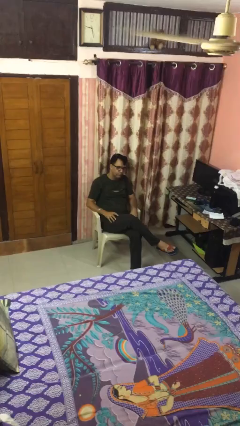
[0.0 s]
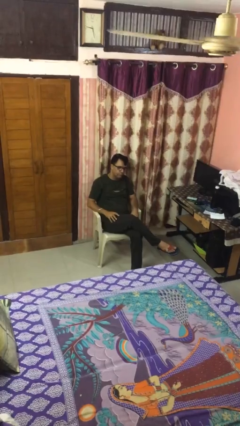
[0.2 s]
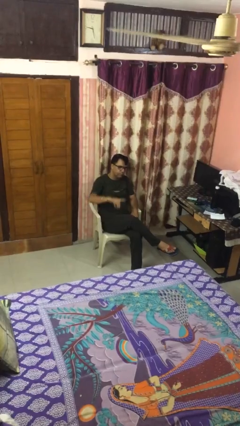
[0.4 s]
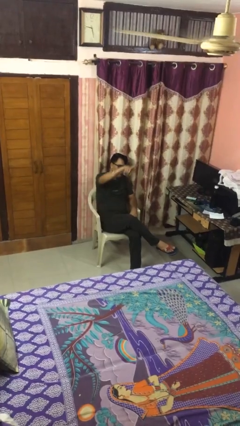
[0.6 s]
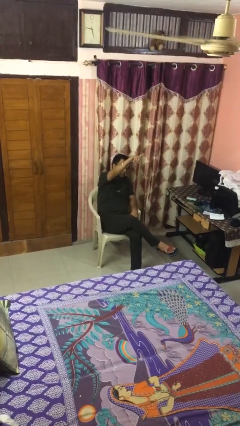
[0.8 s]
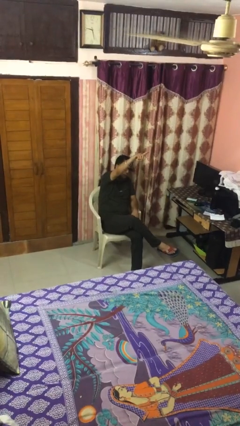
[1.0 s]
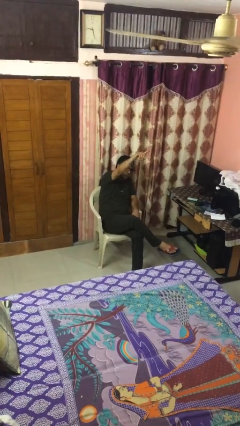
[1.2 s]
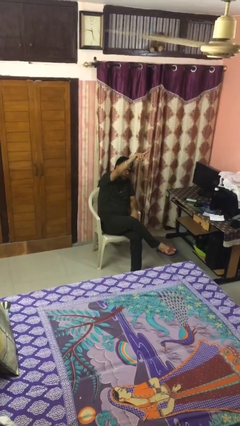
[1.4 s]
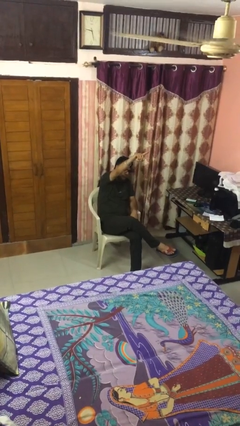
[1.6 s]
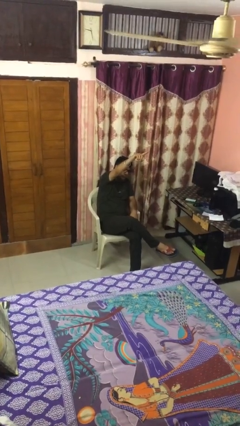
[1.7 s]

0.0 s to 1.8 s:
person gestures raise hand

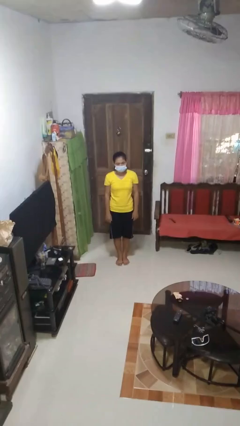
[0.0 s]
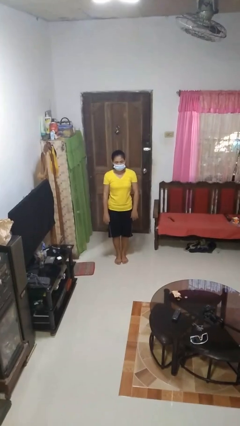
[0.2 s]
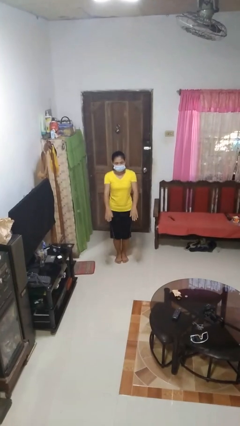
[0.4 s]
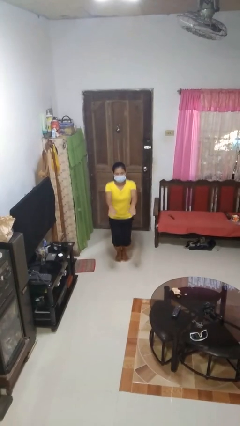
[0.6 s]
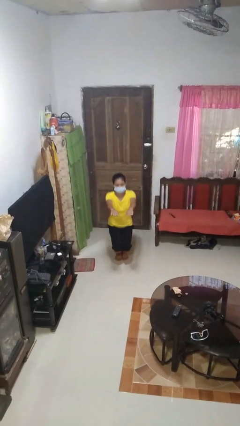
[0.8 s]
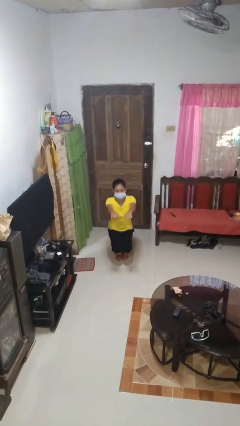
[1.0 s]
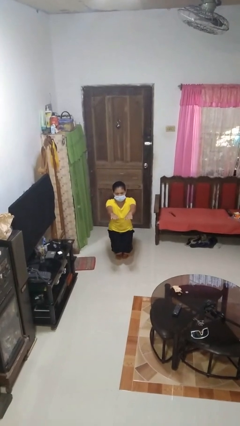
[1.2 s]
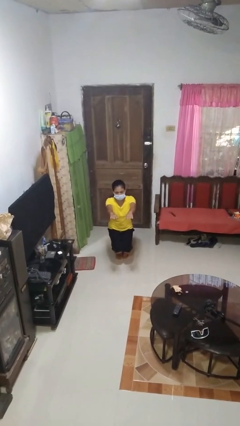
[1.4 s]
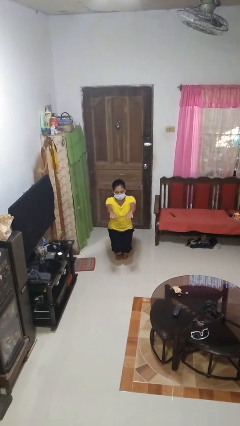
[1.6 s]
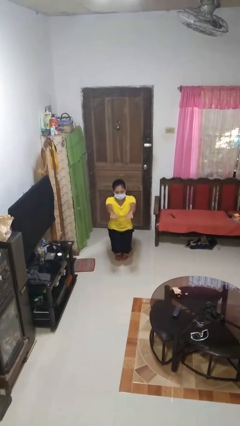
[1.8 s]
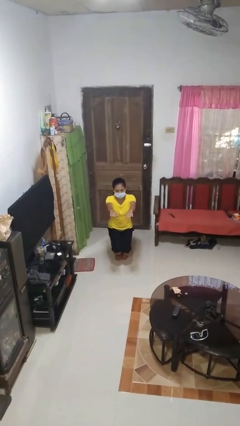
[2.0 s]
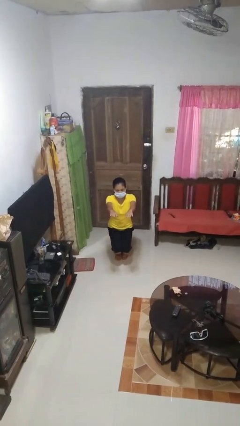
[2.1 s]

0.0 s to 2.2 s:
person squats

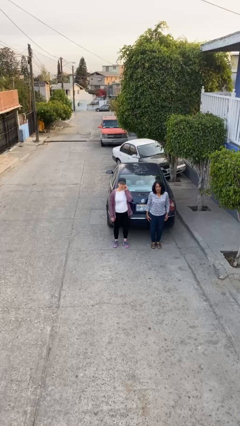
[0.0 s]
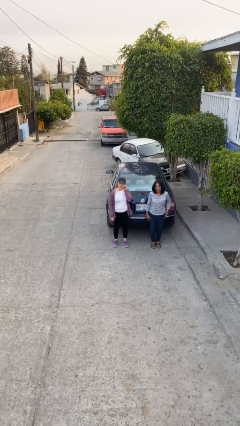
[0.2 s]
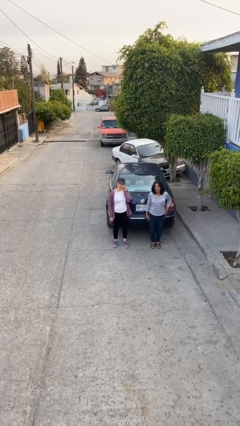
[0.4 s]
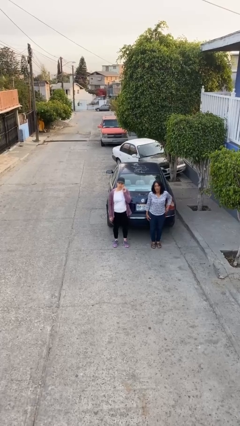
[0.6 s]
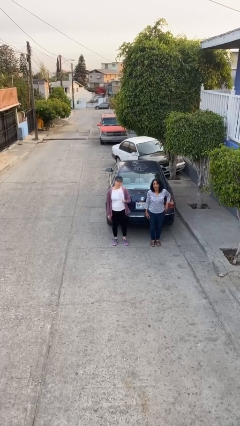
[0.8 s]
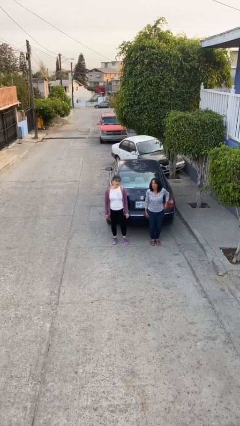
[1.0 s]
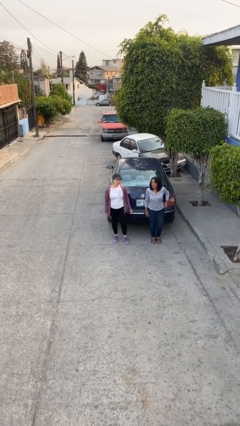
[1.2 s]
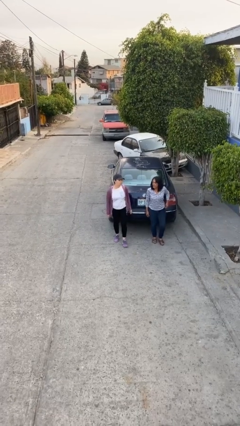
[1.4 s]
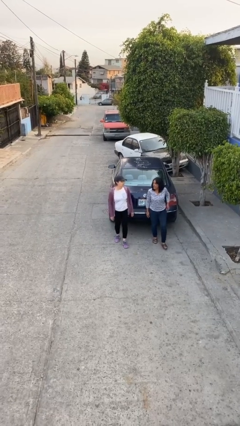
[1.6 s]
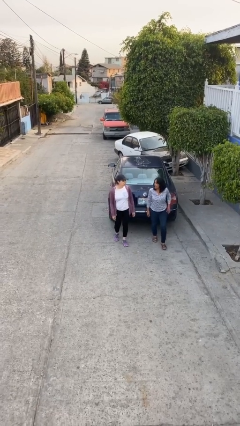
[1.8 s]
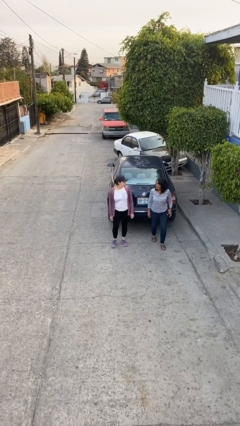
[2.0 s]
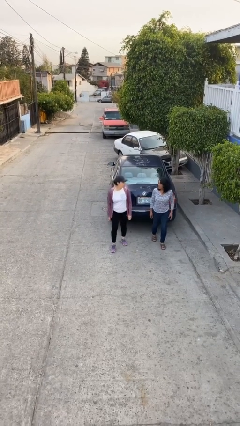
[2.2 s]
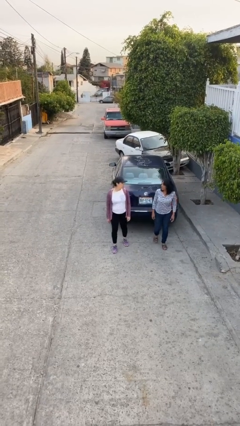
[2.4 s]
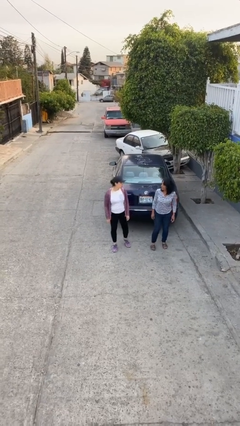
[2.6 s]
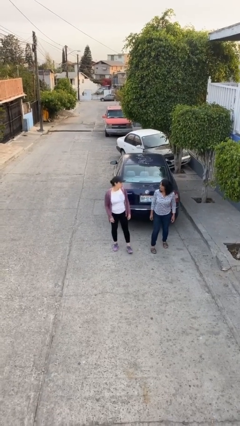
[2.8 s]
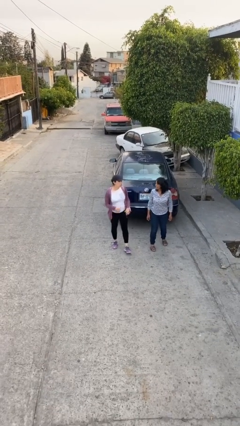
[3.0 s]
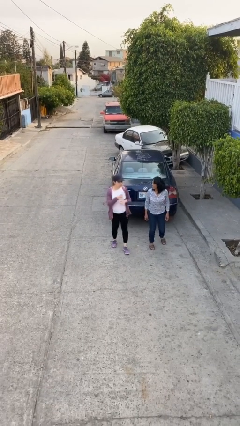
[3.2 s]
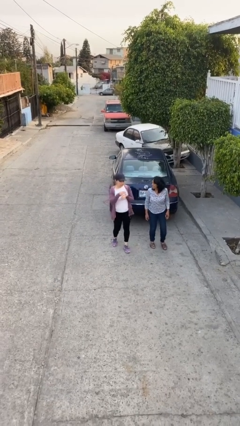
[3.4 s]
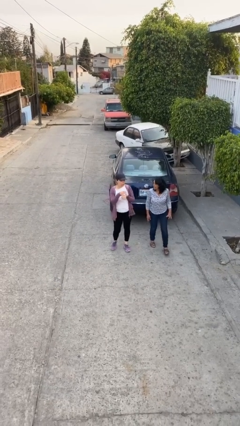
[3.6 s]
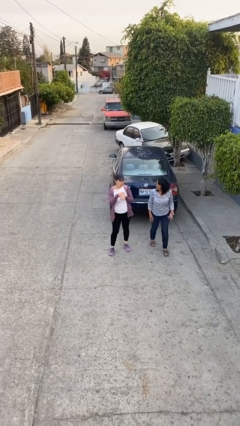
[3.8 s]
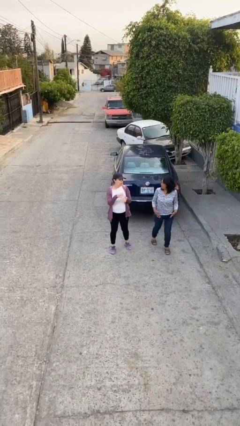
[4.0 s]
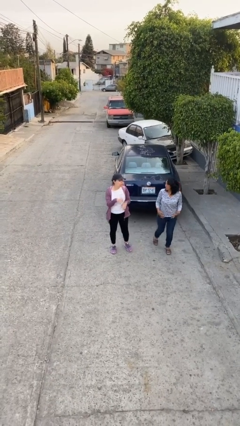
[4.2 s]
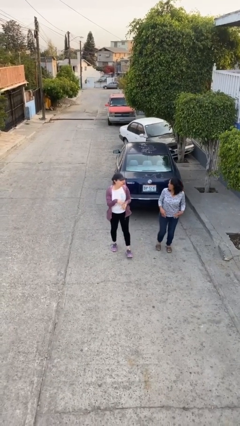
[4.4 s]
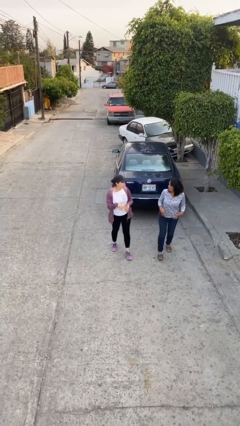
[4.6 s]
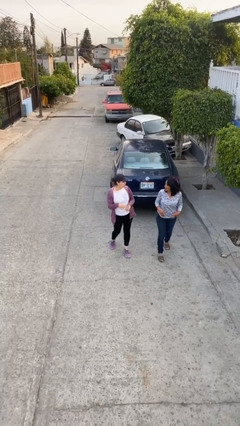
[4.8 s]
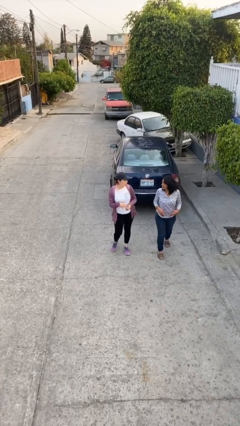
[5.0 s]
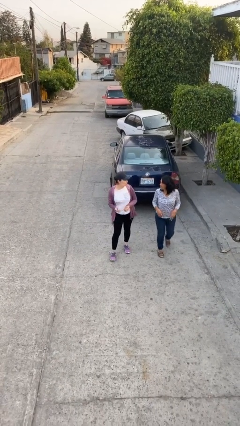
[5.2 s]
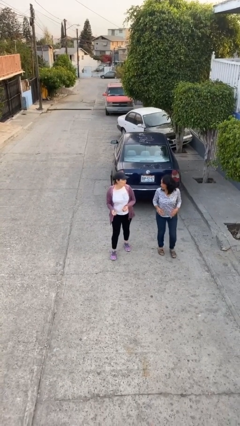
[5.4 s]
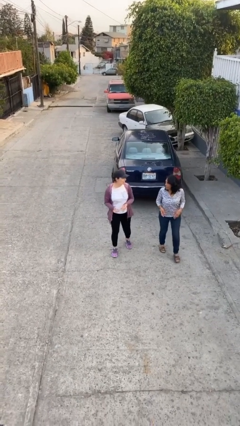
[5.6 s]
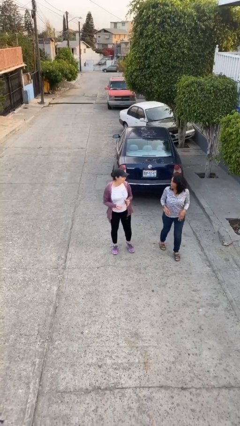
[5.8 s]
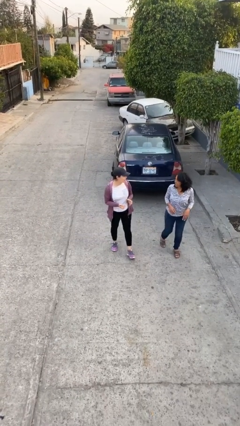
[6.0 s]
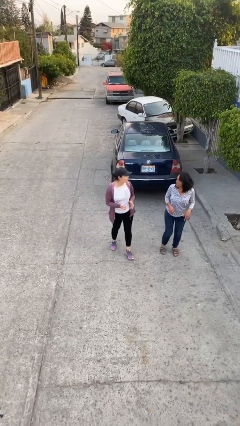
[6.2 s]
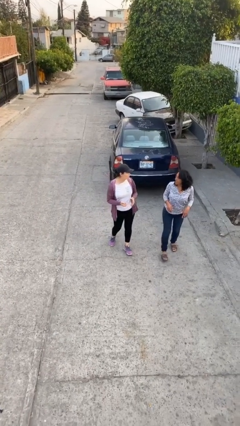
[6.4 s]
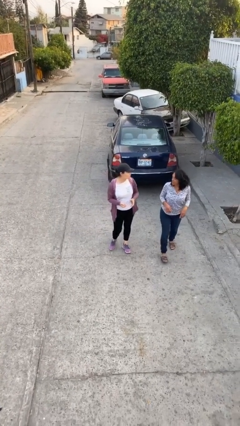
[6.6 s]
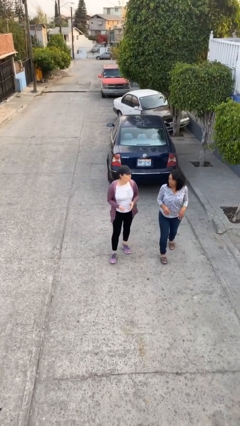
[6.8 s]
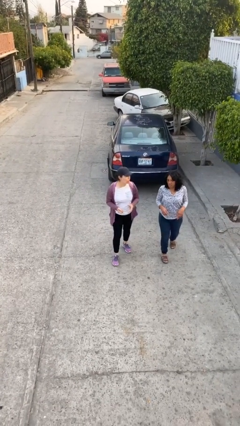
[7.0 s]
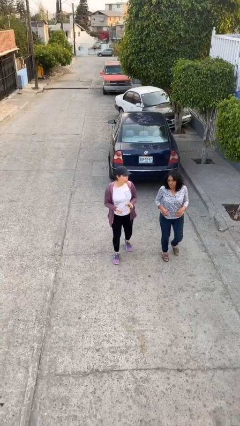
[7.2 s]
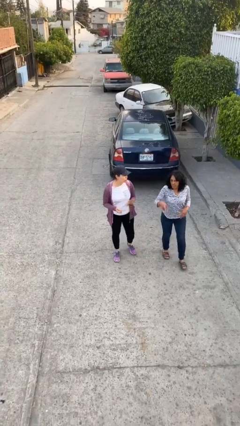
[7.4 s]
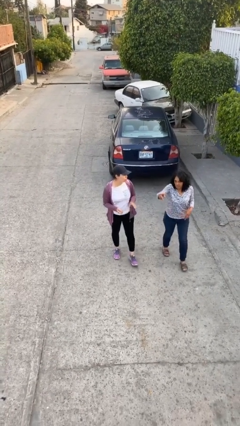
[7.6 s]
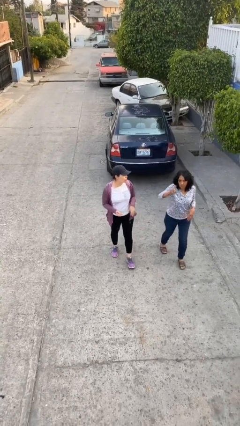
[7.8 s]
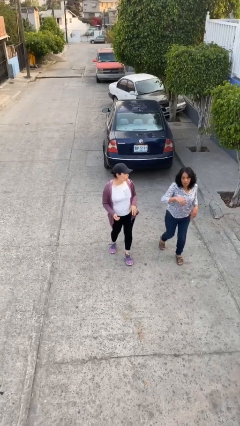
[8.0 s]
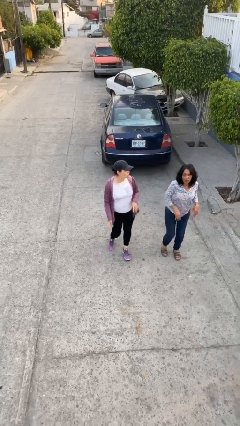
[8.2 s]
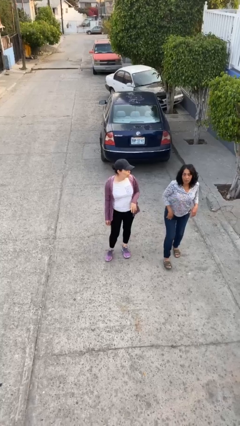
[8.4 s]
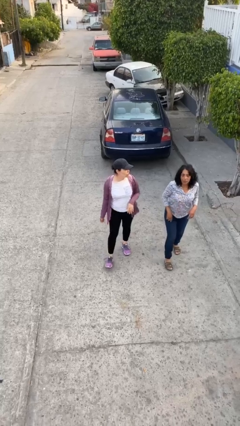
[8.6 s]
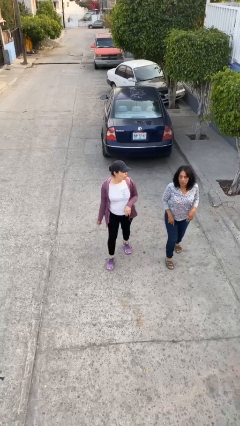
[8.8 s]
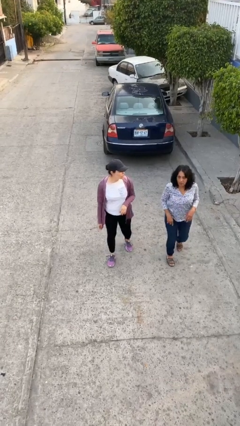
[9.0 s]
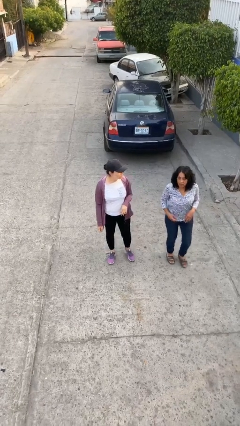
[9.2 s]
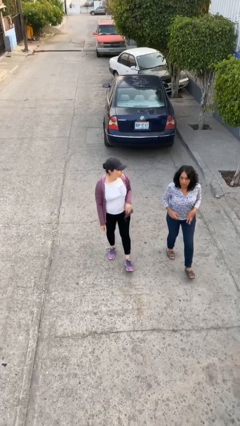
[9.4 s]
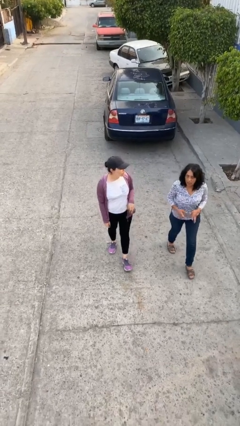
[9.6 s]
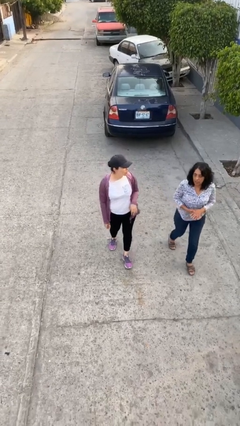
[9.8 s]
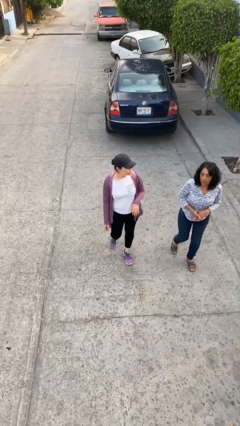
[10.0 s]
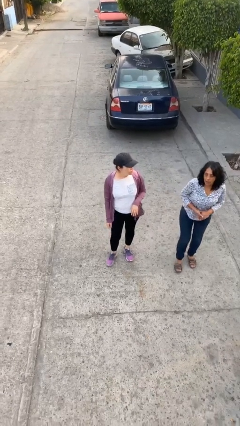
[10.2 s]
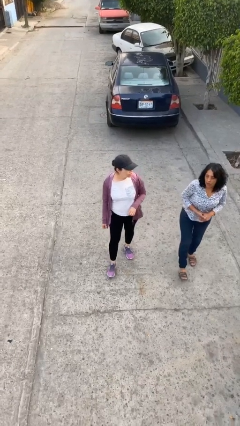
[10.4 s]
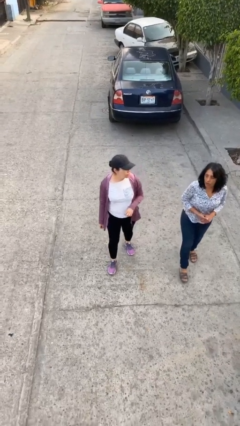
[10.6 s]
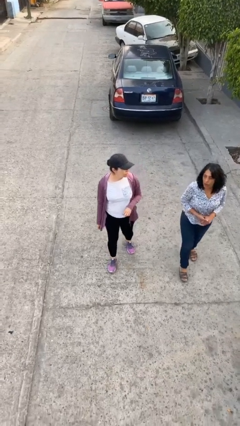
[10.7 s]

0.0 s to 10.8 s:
person talks to person

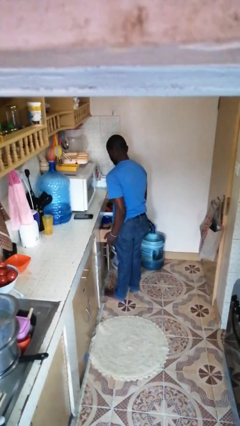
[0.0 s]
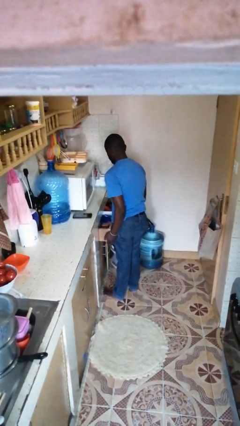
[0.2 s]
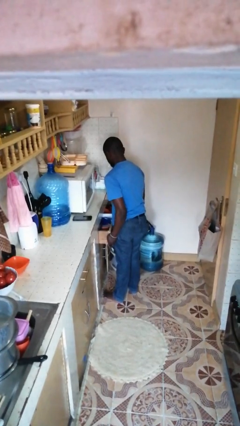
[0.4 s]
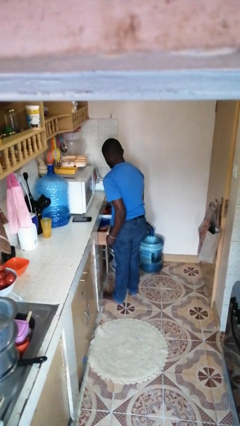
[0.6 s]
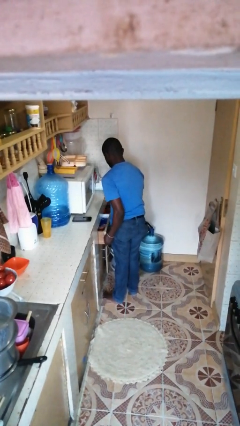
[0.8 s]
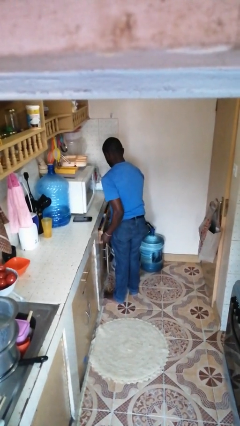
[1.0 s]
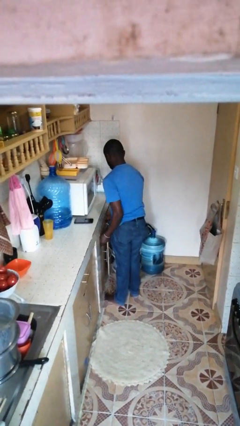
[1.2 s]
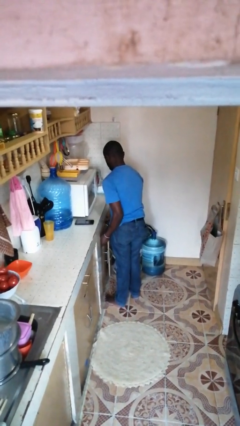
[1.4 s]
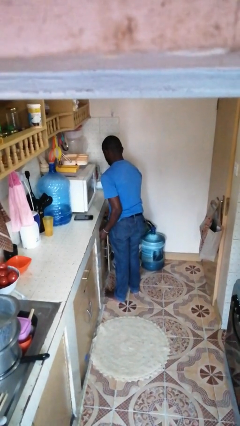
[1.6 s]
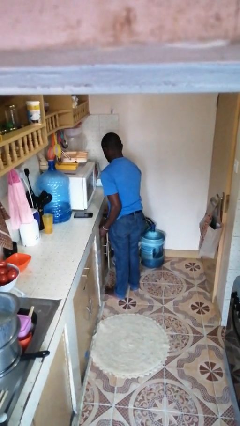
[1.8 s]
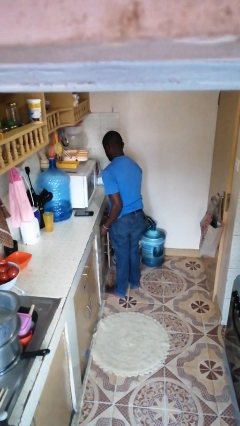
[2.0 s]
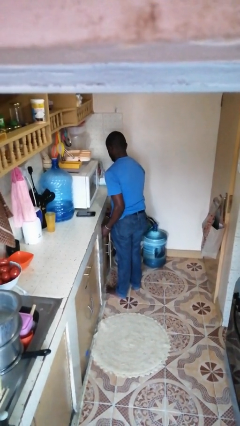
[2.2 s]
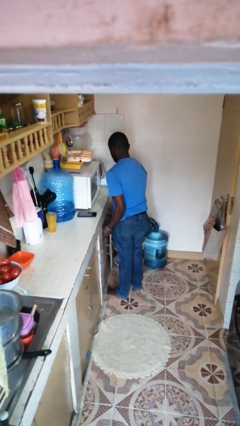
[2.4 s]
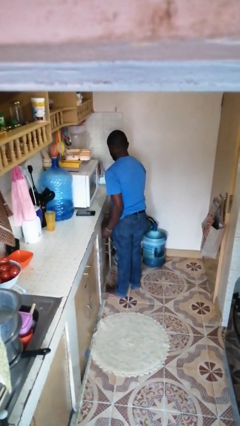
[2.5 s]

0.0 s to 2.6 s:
person closes kitchen drawer
